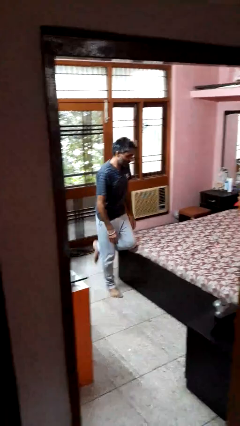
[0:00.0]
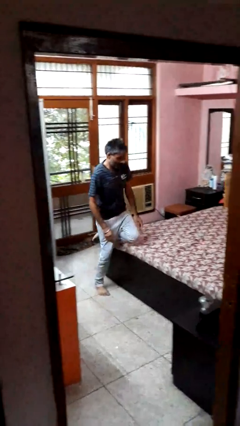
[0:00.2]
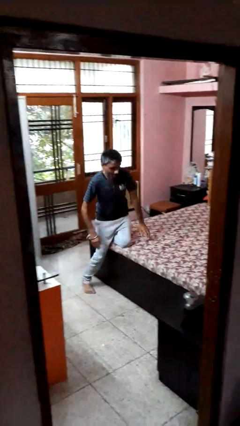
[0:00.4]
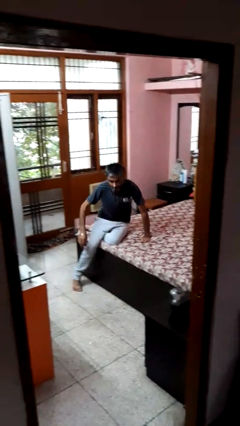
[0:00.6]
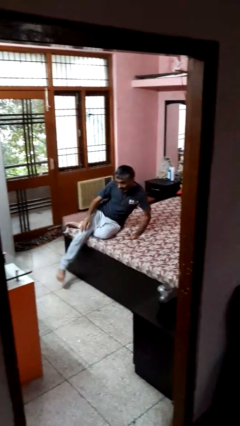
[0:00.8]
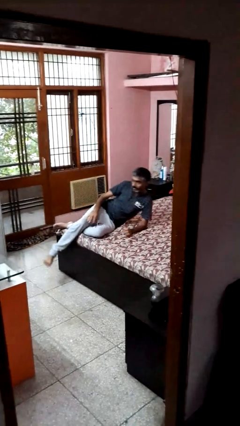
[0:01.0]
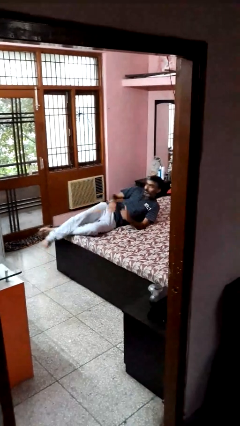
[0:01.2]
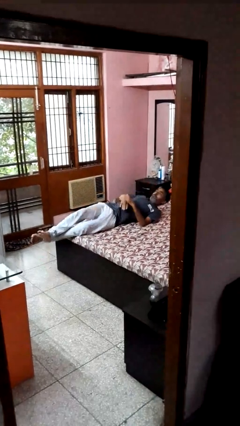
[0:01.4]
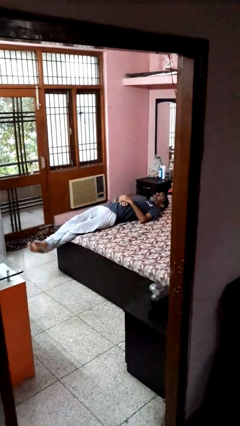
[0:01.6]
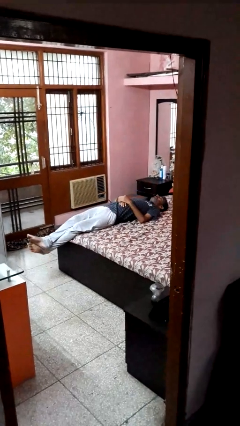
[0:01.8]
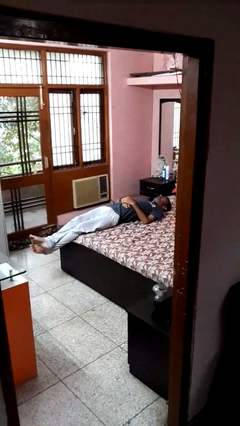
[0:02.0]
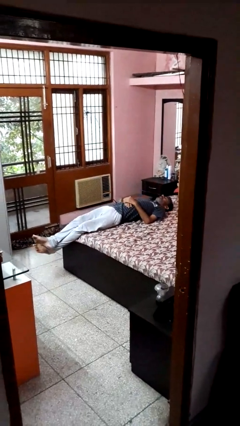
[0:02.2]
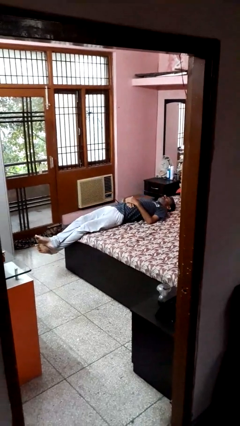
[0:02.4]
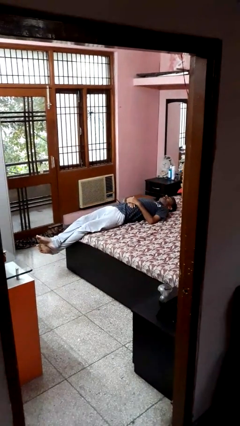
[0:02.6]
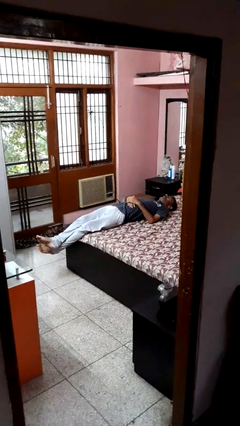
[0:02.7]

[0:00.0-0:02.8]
person lies down on bed

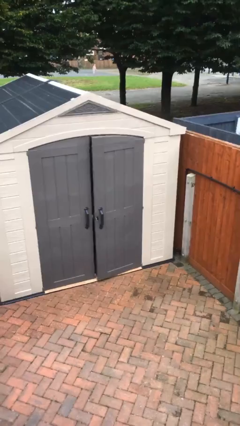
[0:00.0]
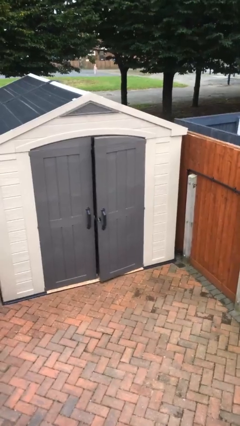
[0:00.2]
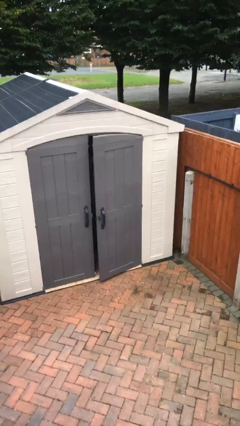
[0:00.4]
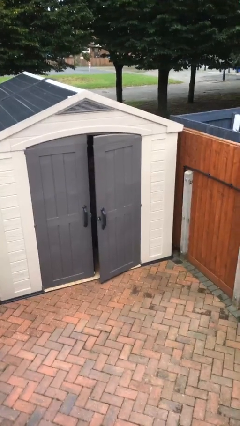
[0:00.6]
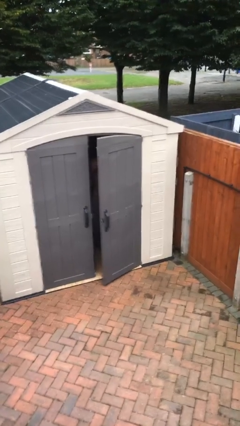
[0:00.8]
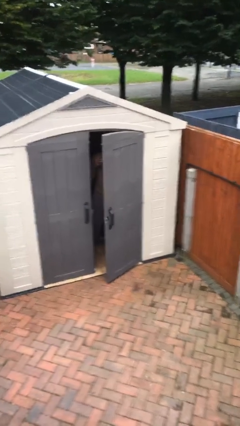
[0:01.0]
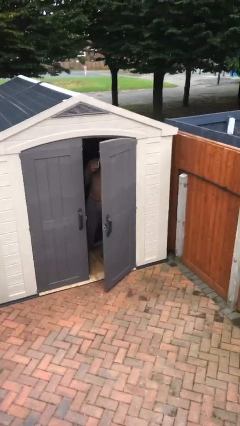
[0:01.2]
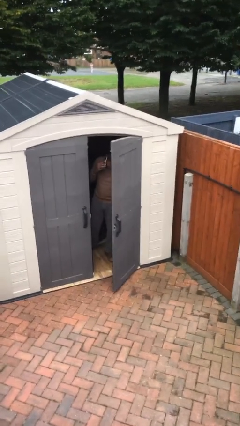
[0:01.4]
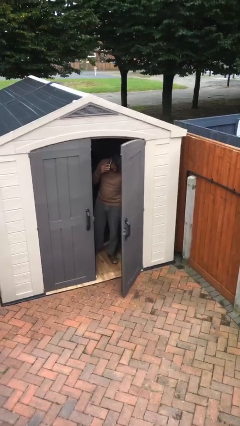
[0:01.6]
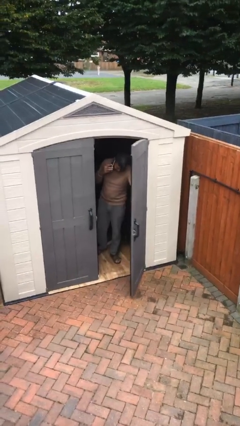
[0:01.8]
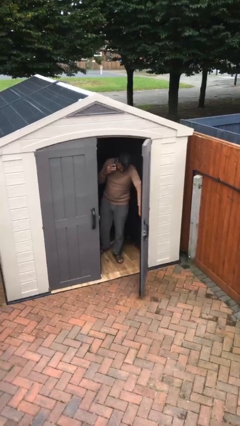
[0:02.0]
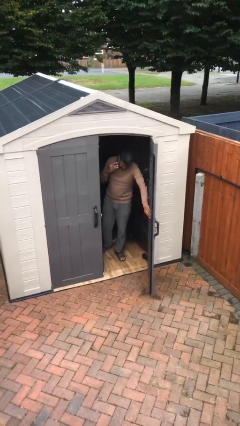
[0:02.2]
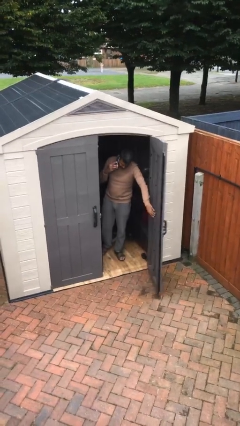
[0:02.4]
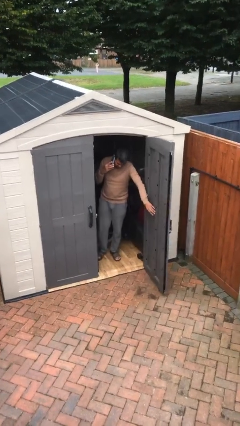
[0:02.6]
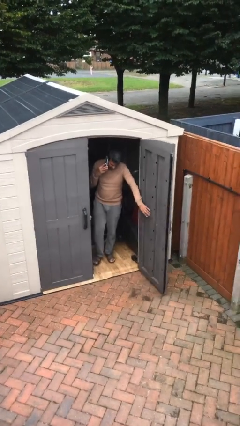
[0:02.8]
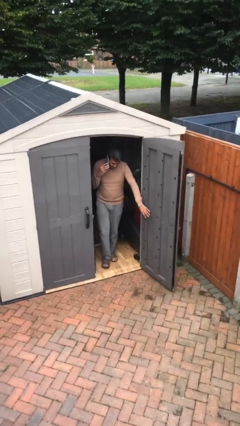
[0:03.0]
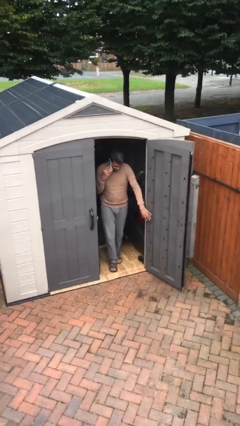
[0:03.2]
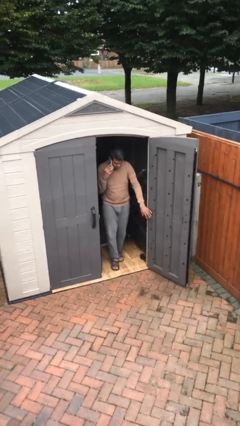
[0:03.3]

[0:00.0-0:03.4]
person opens facility door

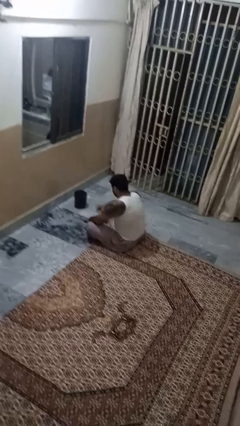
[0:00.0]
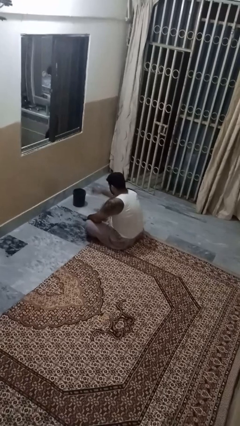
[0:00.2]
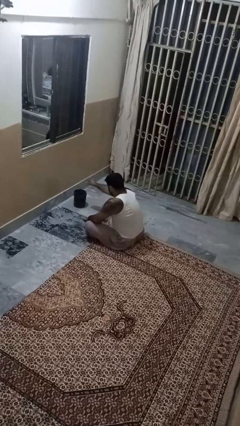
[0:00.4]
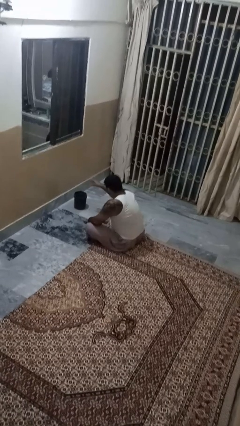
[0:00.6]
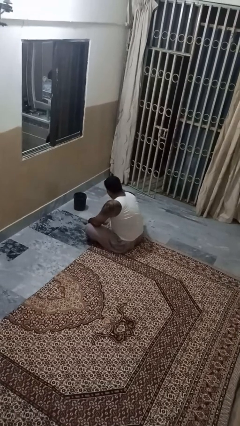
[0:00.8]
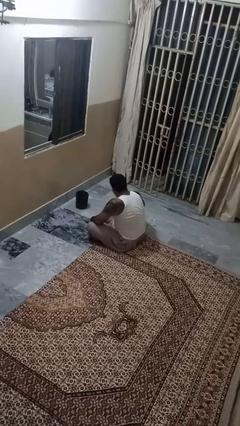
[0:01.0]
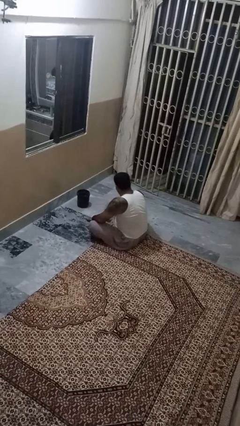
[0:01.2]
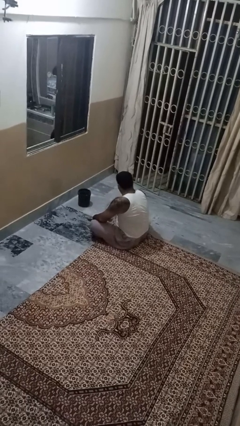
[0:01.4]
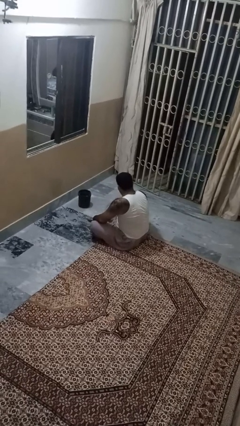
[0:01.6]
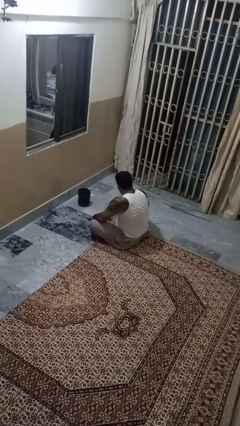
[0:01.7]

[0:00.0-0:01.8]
person discards trash

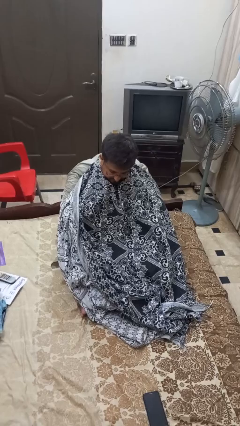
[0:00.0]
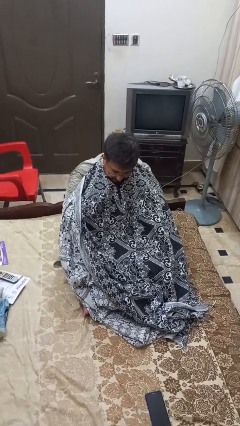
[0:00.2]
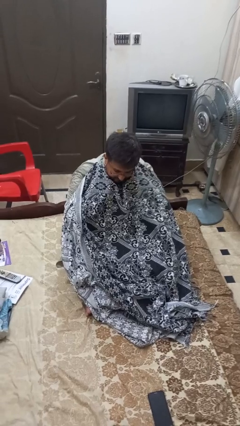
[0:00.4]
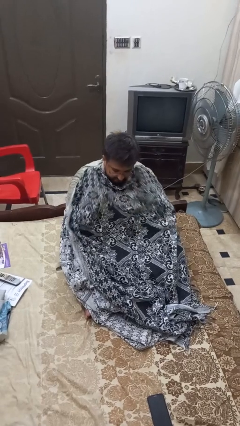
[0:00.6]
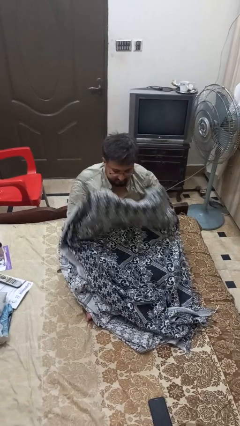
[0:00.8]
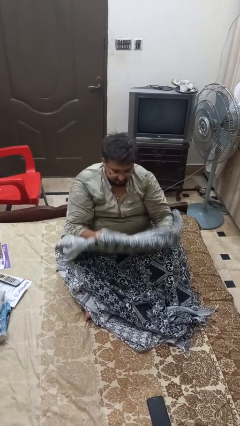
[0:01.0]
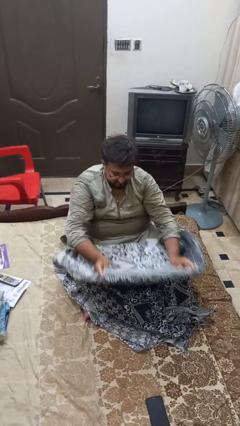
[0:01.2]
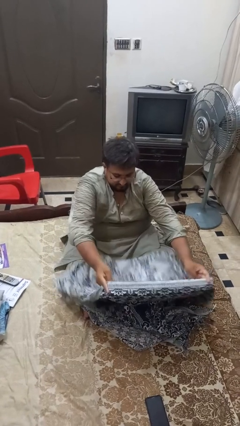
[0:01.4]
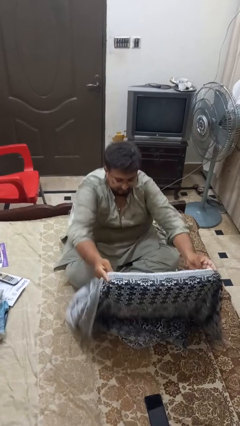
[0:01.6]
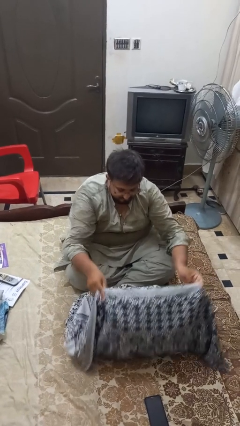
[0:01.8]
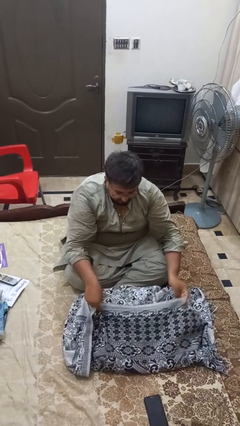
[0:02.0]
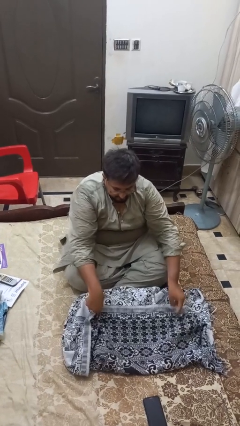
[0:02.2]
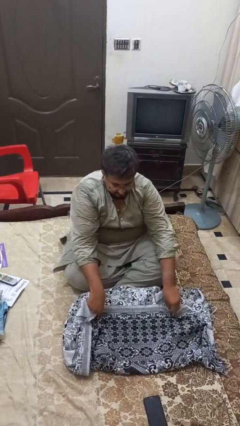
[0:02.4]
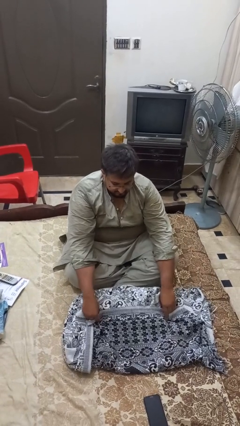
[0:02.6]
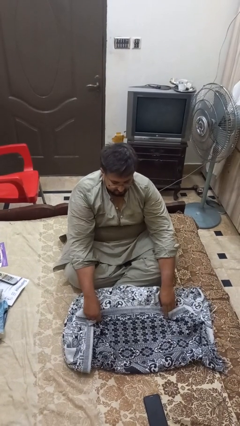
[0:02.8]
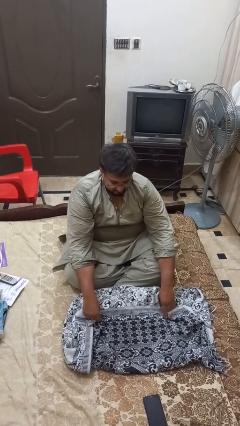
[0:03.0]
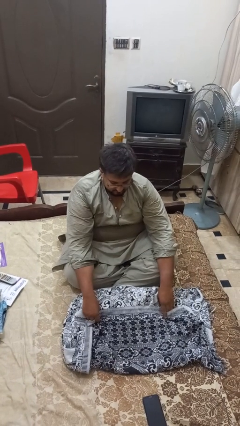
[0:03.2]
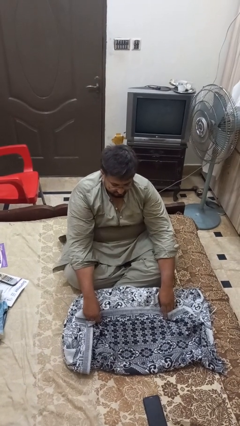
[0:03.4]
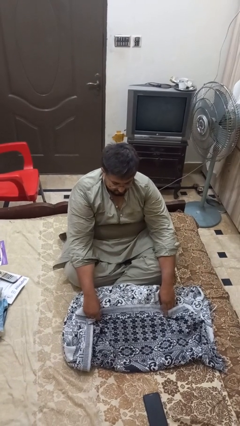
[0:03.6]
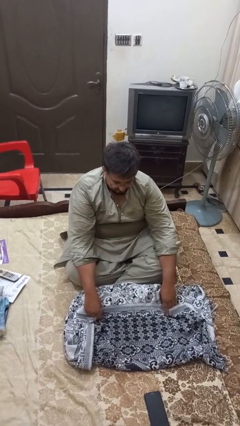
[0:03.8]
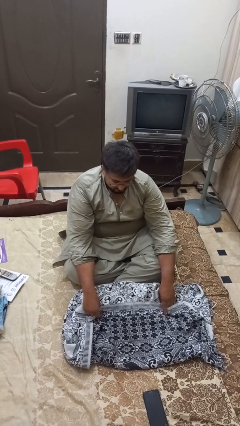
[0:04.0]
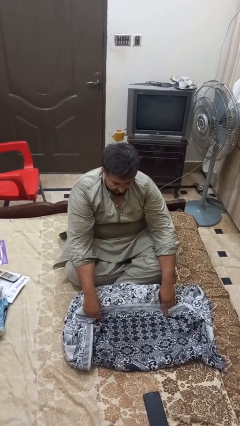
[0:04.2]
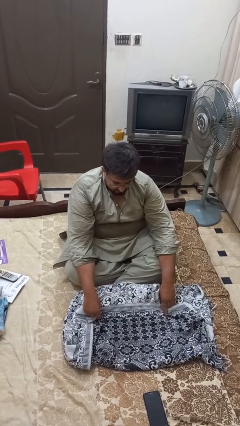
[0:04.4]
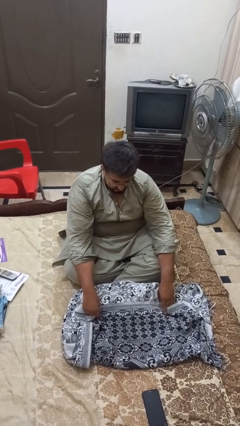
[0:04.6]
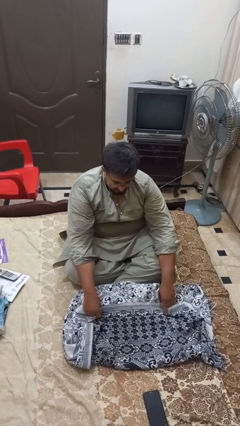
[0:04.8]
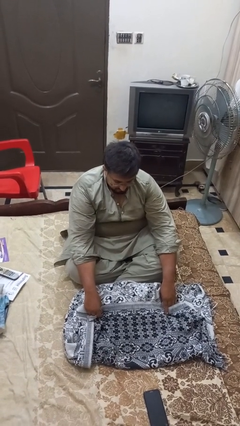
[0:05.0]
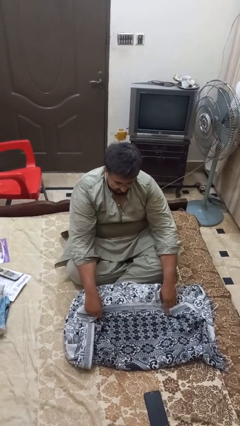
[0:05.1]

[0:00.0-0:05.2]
person uncovers with blanket

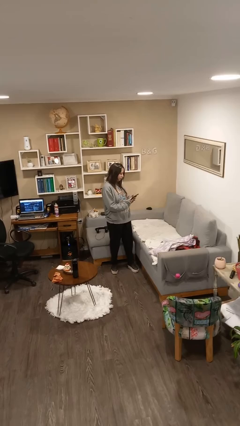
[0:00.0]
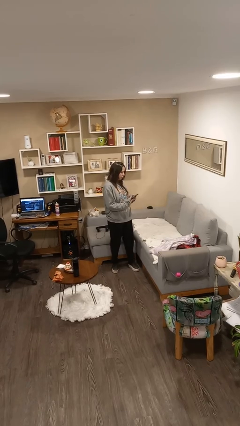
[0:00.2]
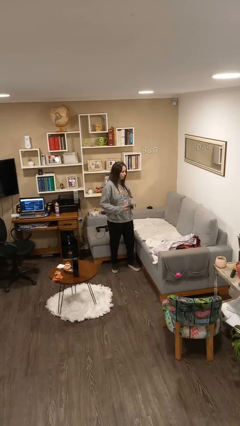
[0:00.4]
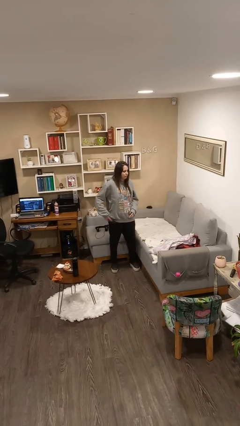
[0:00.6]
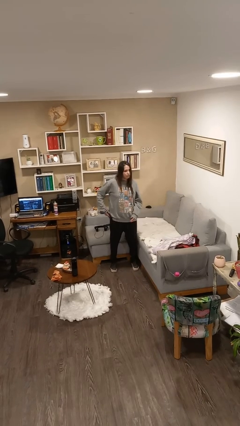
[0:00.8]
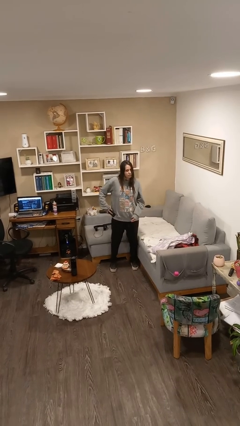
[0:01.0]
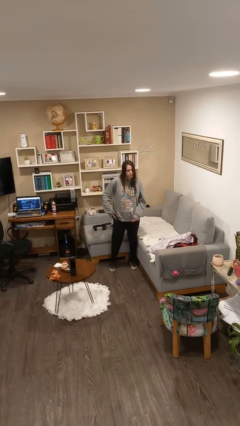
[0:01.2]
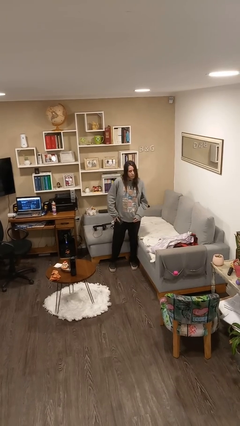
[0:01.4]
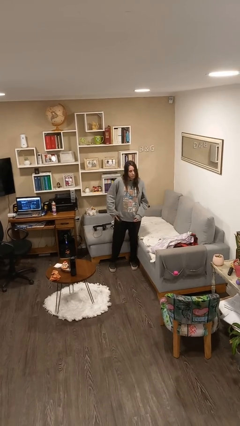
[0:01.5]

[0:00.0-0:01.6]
person puts phone into pocket

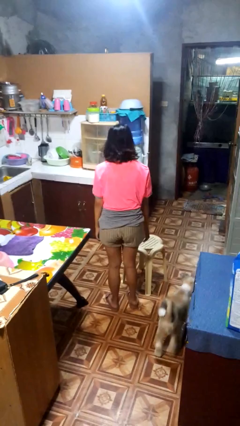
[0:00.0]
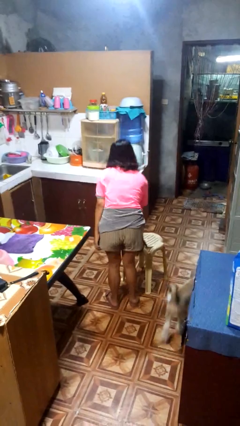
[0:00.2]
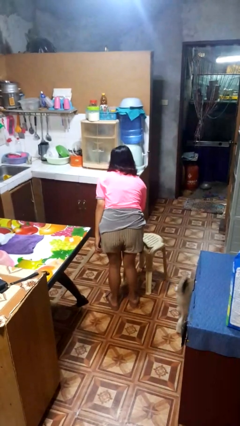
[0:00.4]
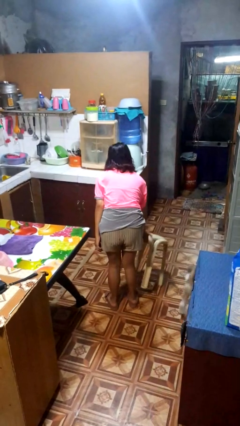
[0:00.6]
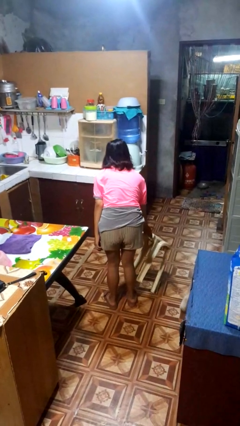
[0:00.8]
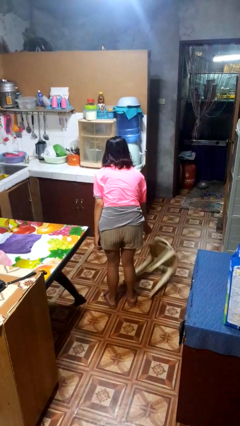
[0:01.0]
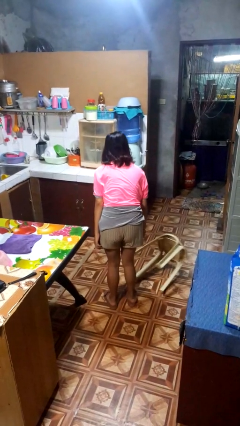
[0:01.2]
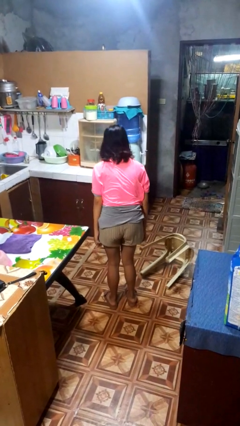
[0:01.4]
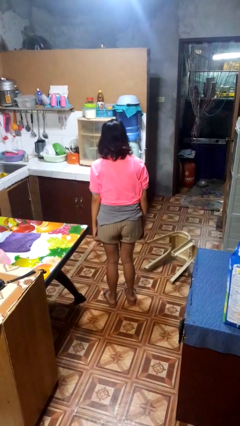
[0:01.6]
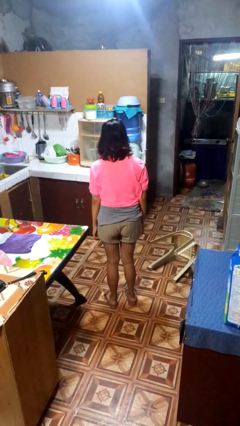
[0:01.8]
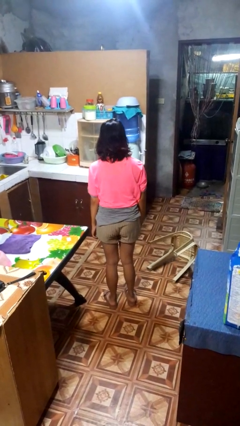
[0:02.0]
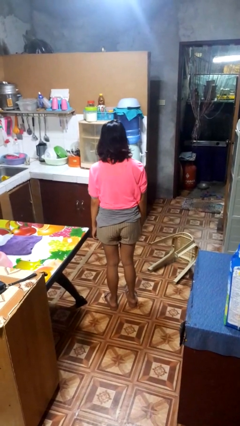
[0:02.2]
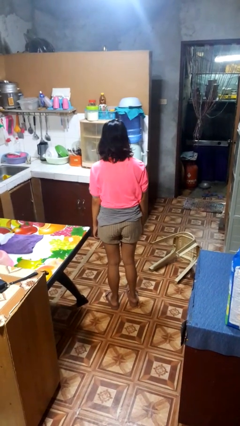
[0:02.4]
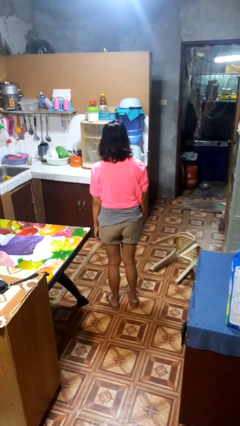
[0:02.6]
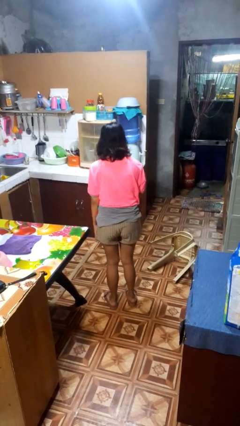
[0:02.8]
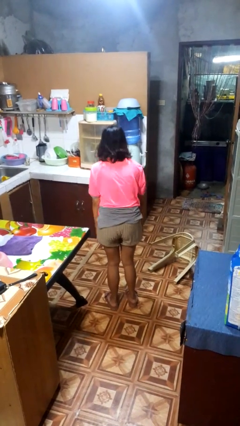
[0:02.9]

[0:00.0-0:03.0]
person knocks over furniture
